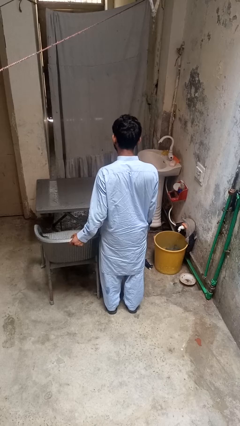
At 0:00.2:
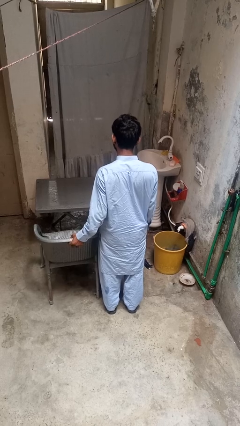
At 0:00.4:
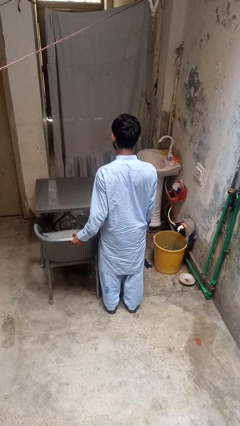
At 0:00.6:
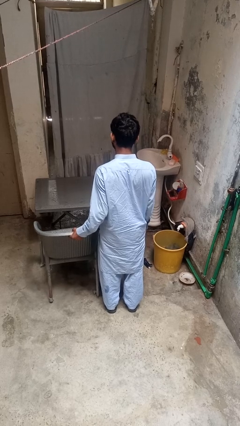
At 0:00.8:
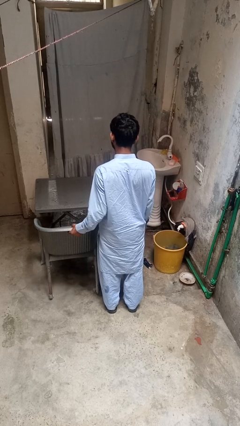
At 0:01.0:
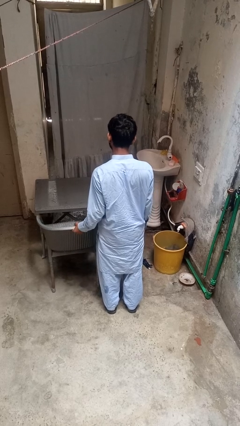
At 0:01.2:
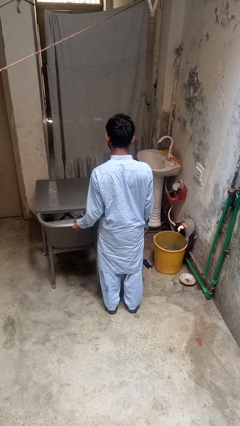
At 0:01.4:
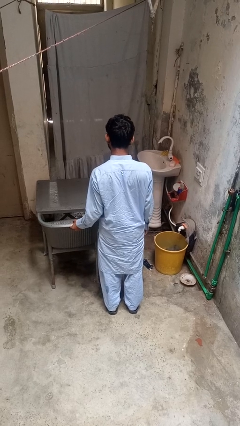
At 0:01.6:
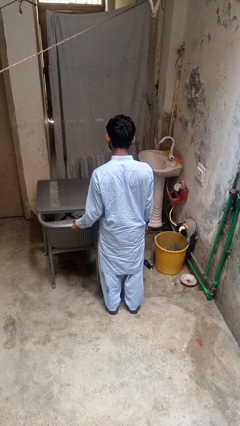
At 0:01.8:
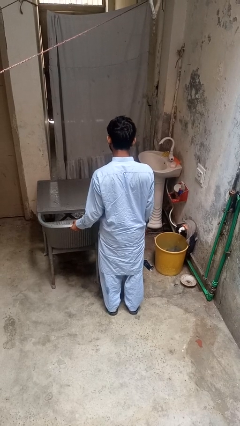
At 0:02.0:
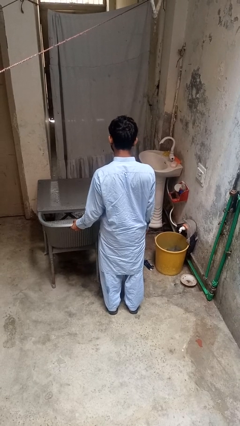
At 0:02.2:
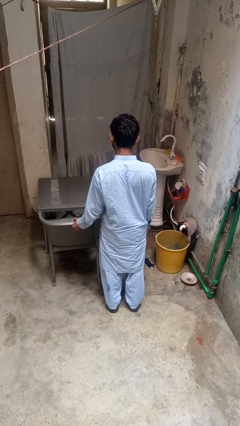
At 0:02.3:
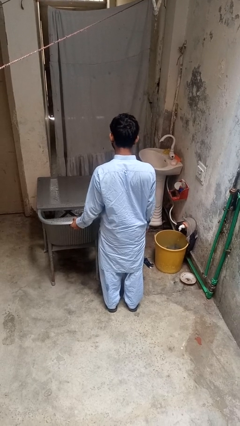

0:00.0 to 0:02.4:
person pushes in chair

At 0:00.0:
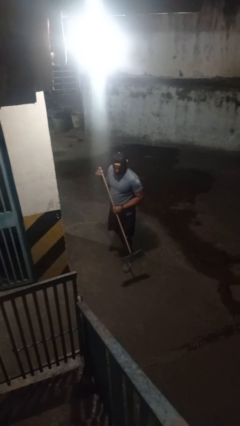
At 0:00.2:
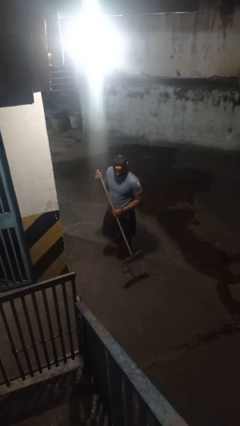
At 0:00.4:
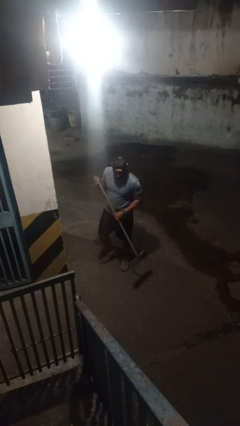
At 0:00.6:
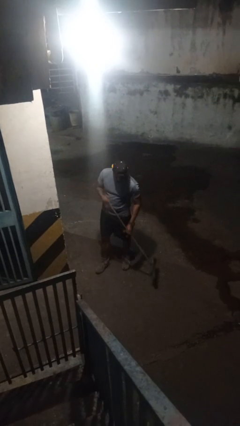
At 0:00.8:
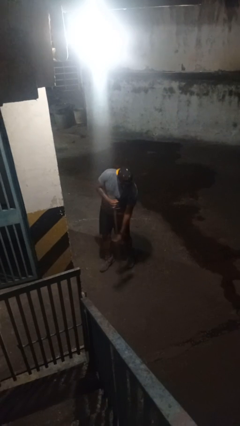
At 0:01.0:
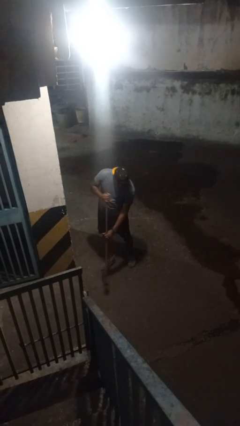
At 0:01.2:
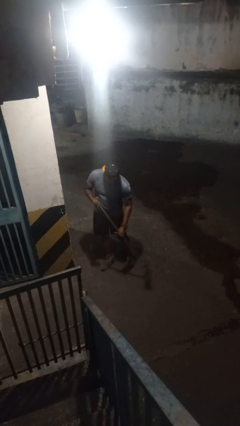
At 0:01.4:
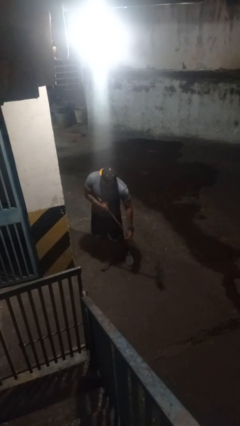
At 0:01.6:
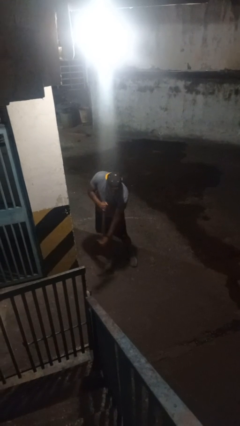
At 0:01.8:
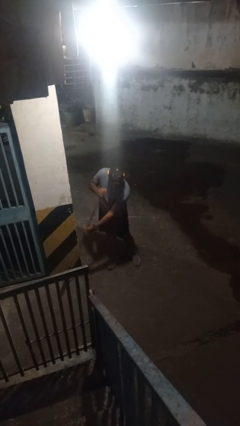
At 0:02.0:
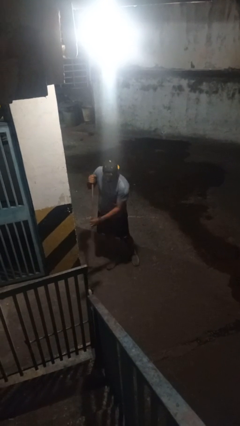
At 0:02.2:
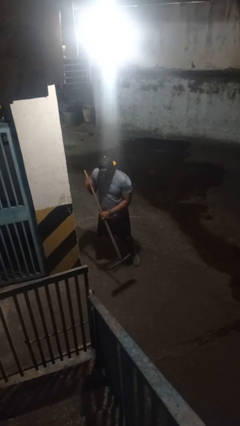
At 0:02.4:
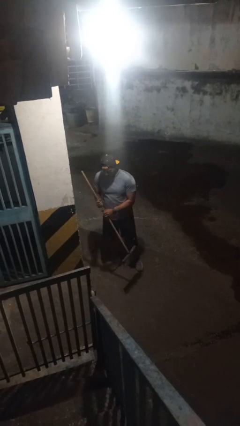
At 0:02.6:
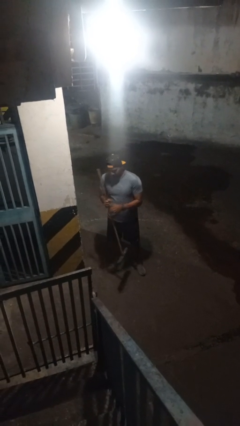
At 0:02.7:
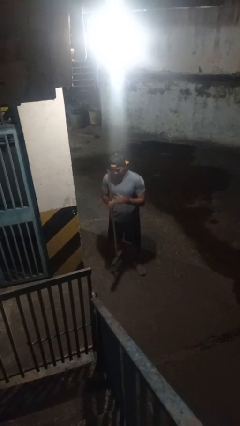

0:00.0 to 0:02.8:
person sweeps floor

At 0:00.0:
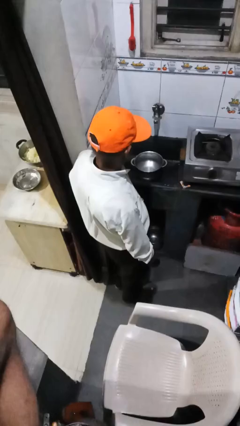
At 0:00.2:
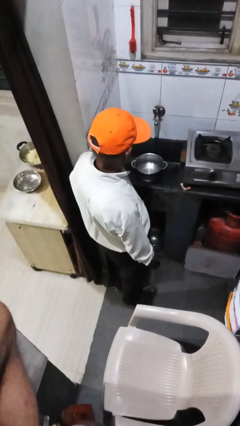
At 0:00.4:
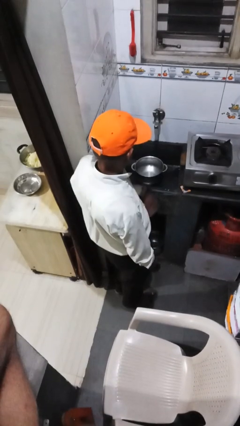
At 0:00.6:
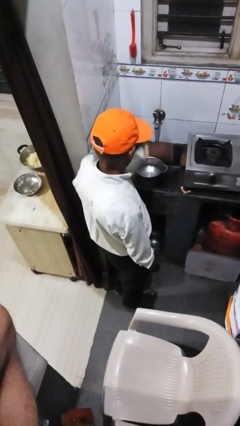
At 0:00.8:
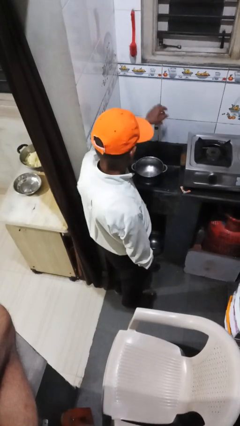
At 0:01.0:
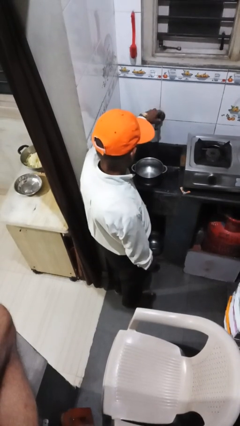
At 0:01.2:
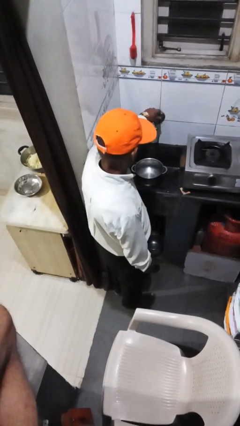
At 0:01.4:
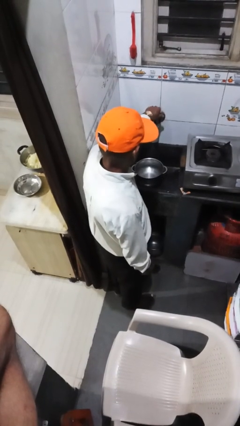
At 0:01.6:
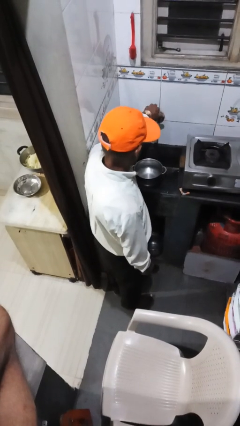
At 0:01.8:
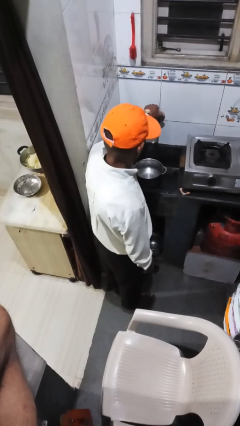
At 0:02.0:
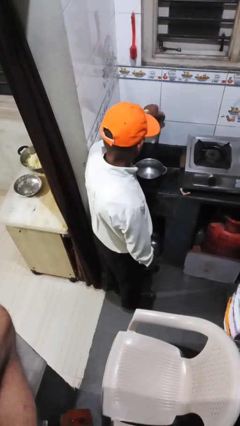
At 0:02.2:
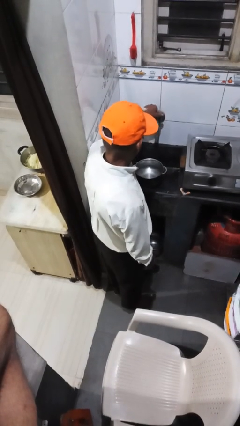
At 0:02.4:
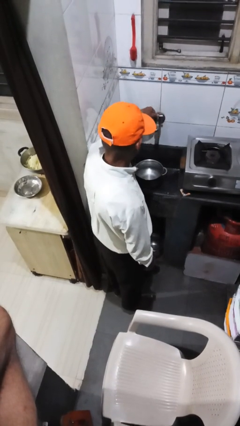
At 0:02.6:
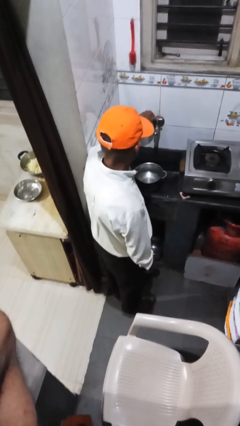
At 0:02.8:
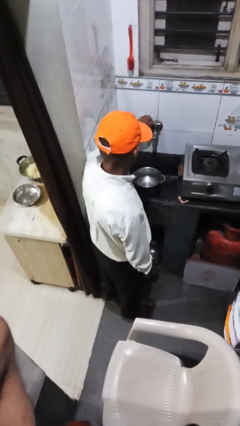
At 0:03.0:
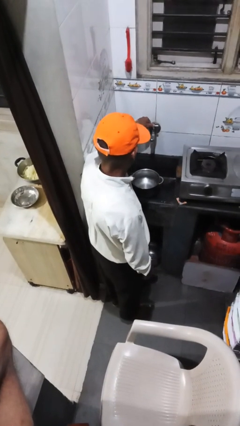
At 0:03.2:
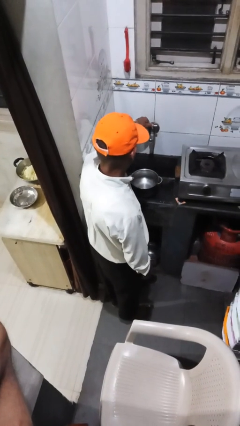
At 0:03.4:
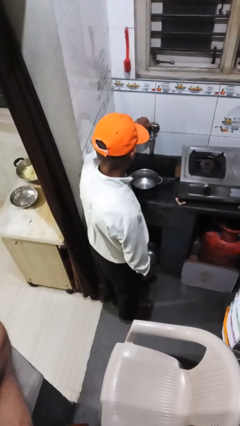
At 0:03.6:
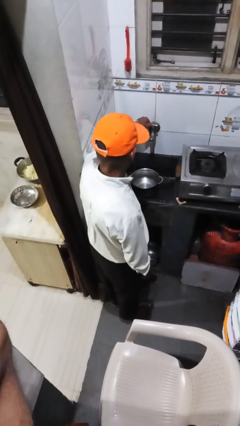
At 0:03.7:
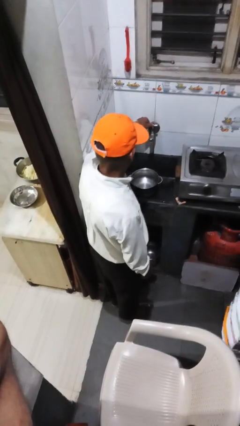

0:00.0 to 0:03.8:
person turns on faucet

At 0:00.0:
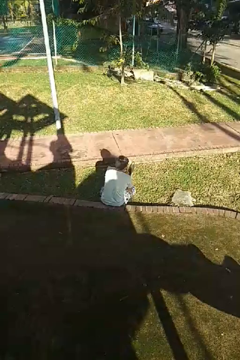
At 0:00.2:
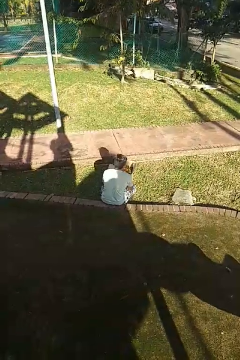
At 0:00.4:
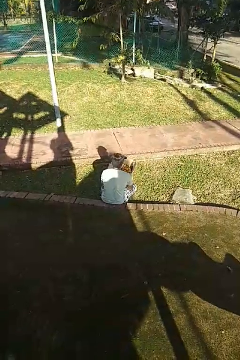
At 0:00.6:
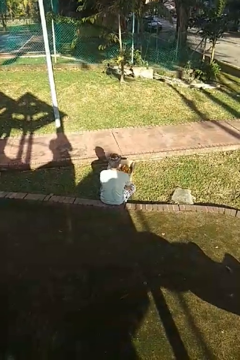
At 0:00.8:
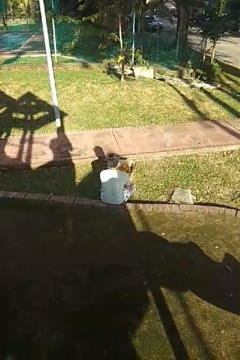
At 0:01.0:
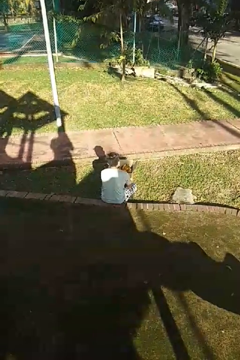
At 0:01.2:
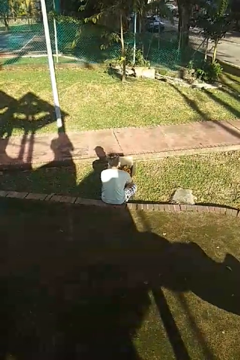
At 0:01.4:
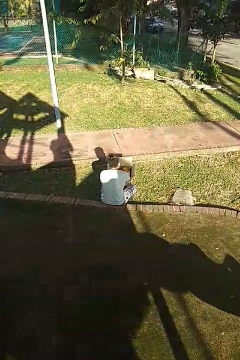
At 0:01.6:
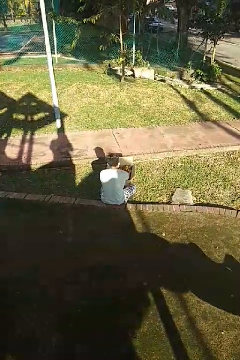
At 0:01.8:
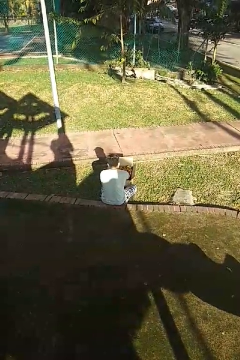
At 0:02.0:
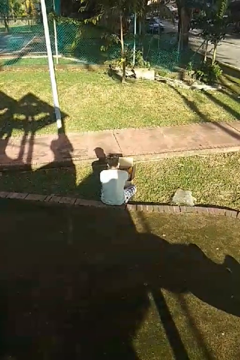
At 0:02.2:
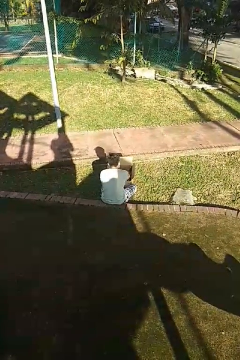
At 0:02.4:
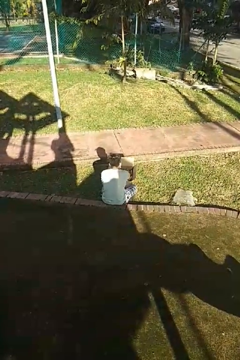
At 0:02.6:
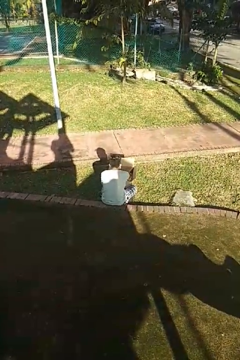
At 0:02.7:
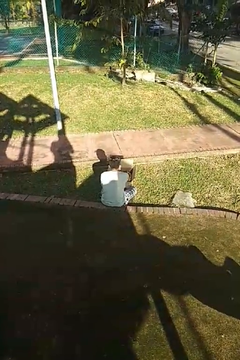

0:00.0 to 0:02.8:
person searches in box

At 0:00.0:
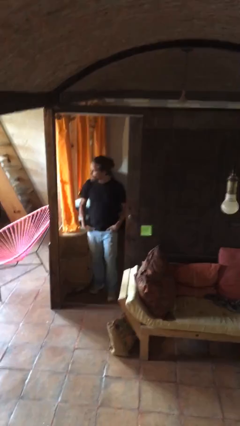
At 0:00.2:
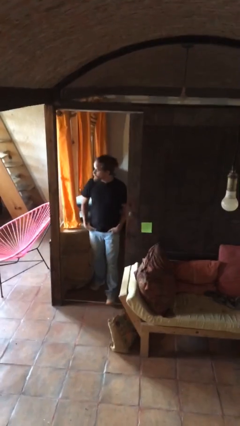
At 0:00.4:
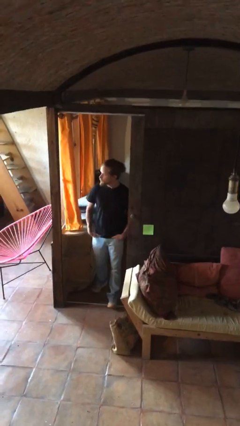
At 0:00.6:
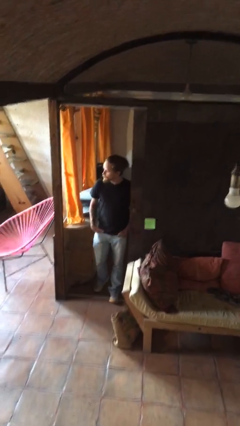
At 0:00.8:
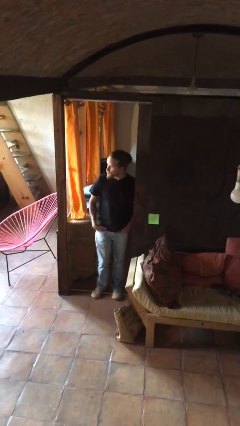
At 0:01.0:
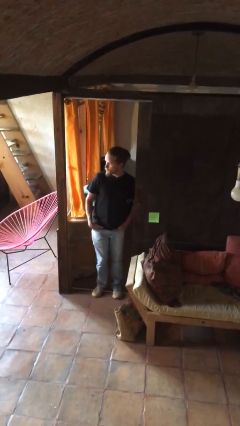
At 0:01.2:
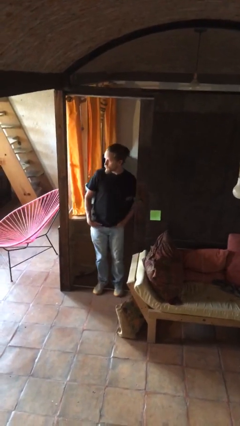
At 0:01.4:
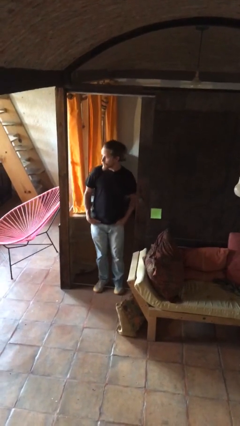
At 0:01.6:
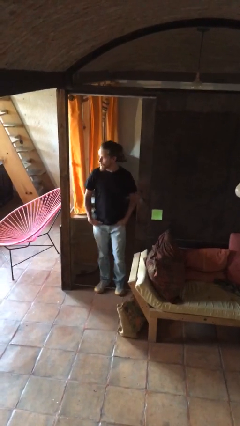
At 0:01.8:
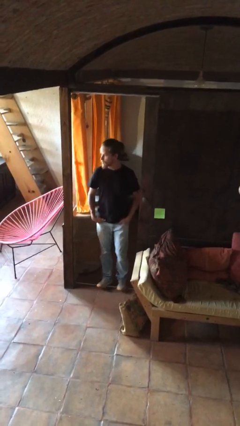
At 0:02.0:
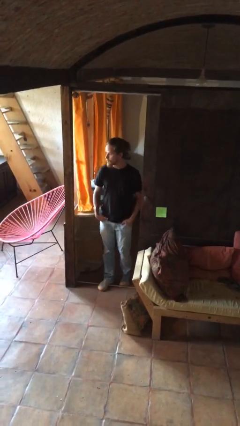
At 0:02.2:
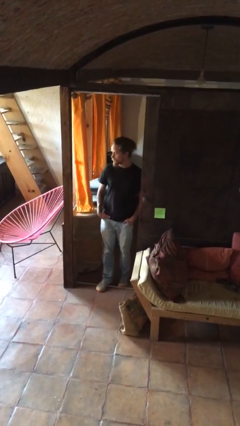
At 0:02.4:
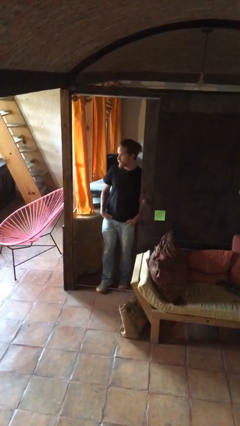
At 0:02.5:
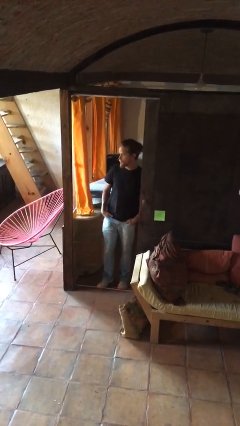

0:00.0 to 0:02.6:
person bumps into wall

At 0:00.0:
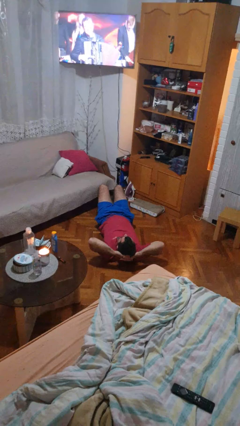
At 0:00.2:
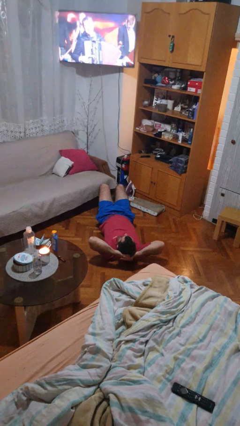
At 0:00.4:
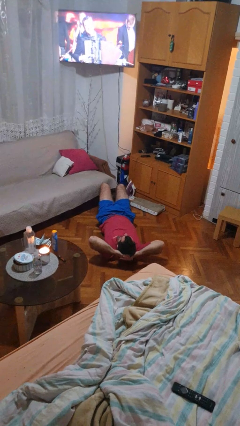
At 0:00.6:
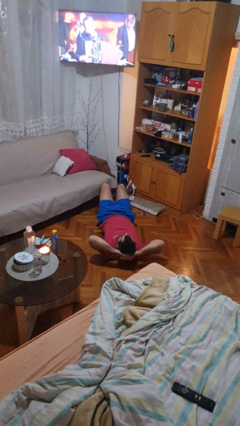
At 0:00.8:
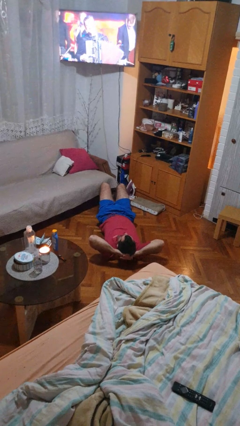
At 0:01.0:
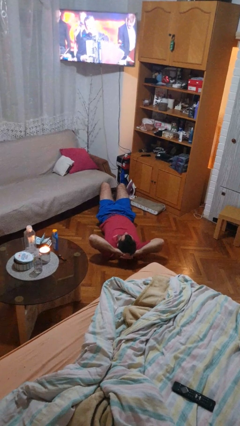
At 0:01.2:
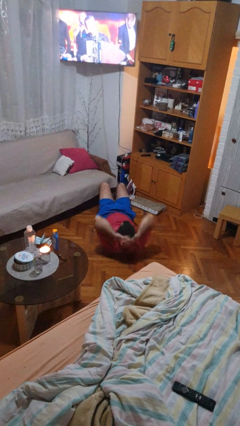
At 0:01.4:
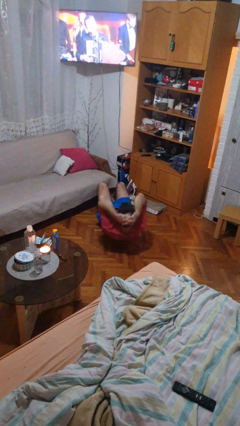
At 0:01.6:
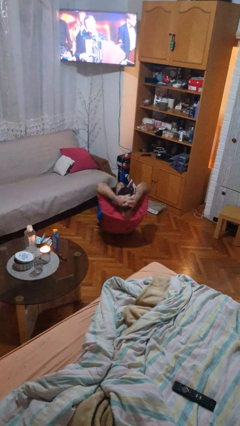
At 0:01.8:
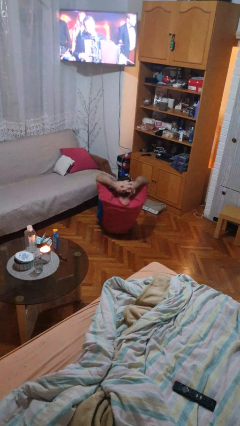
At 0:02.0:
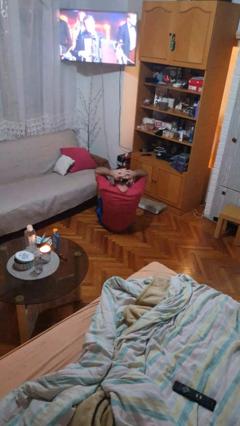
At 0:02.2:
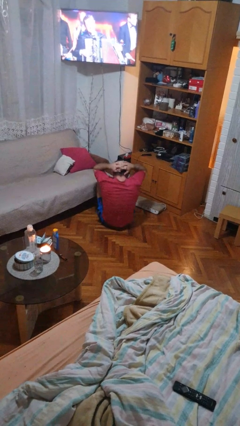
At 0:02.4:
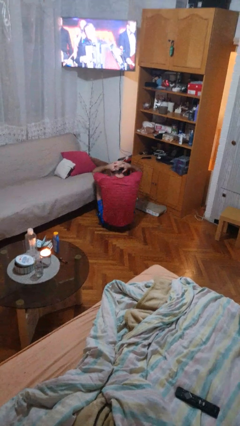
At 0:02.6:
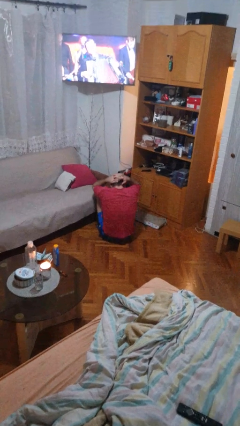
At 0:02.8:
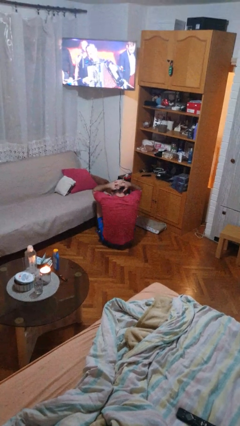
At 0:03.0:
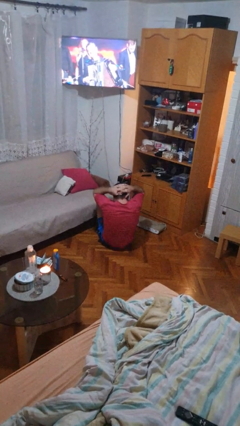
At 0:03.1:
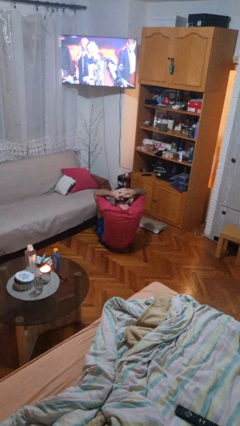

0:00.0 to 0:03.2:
person exercises with situp

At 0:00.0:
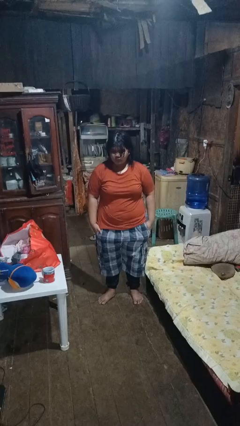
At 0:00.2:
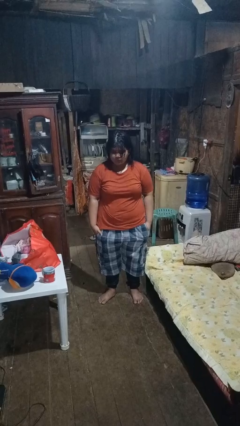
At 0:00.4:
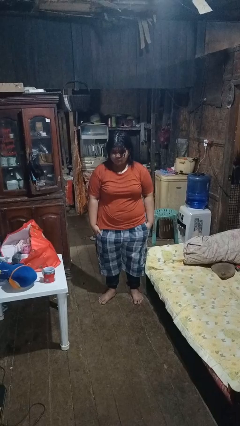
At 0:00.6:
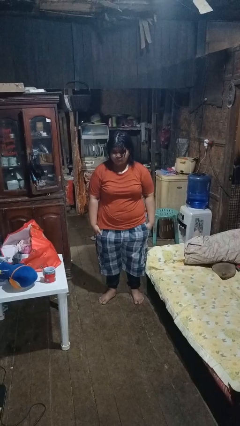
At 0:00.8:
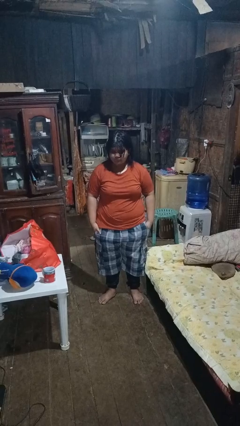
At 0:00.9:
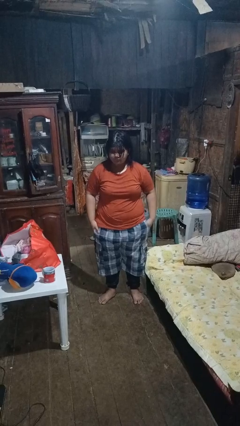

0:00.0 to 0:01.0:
person puts hands in back pockets
